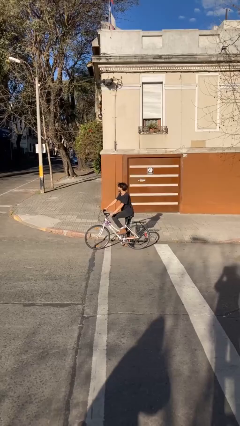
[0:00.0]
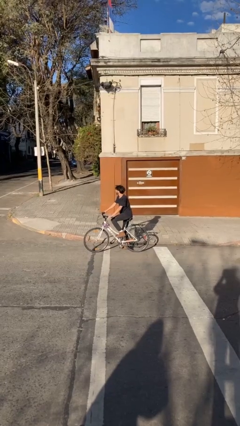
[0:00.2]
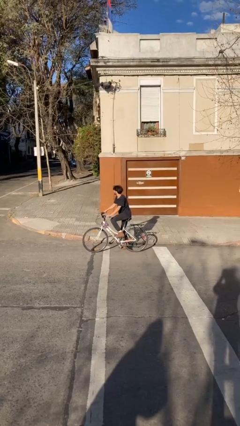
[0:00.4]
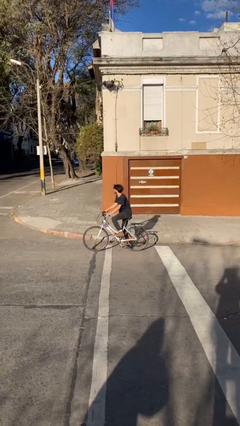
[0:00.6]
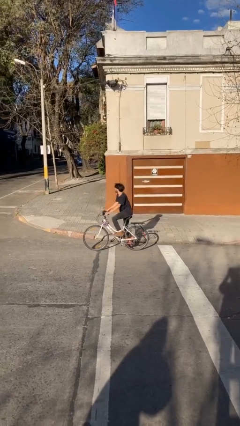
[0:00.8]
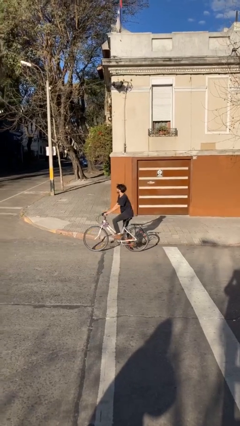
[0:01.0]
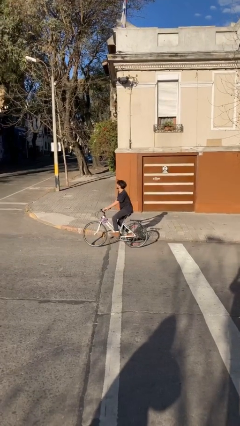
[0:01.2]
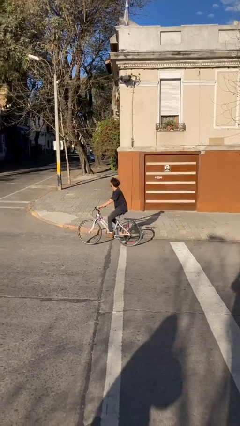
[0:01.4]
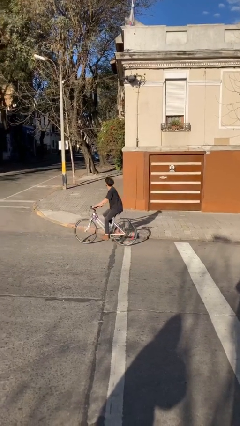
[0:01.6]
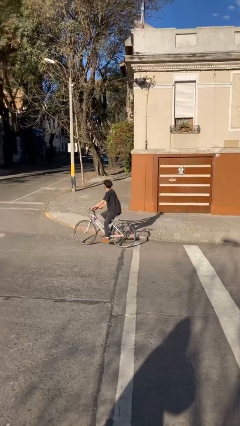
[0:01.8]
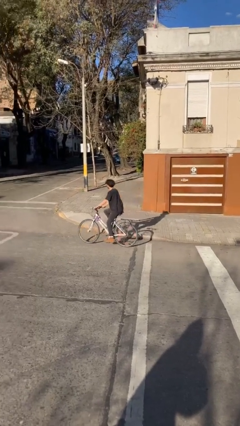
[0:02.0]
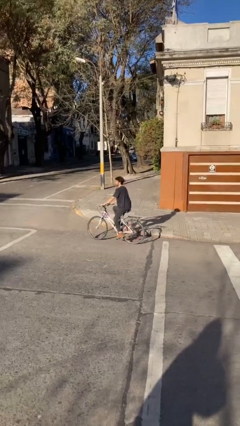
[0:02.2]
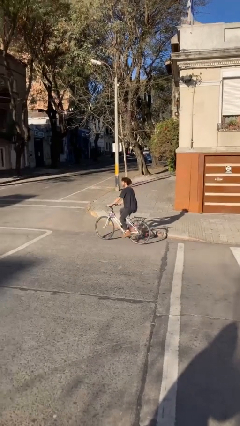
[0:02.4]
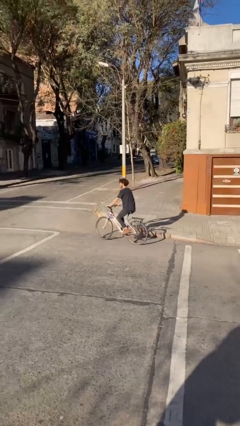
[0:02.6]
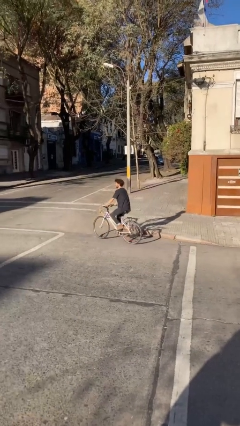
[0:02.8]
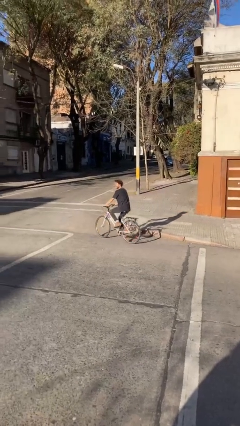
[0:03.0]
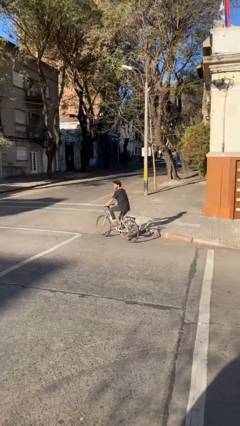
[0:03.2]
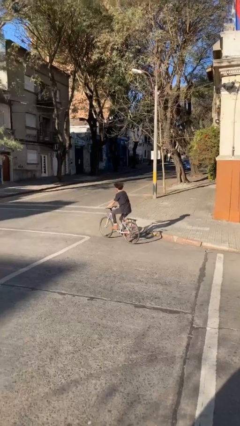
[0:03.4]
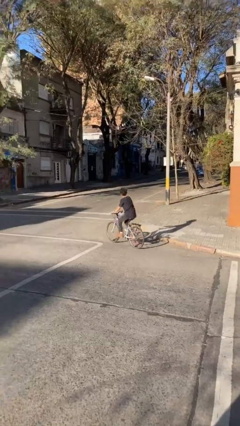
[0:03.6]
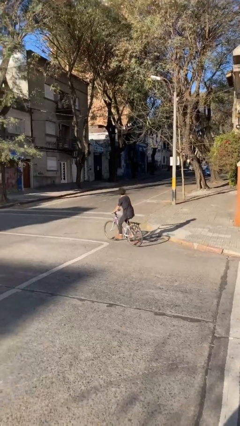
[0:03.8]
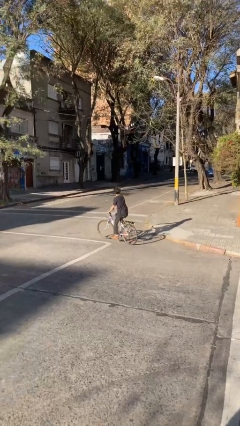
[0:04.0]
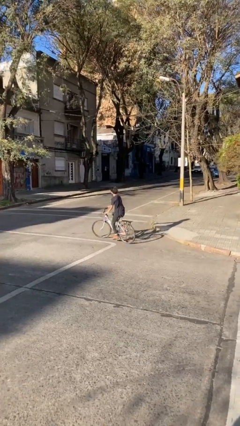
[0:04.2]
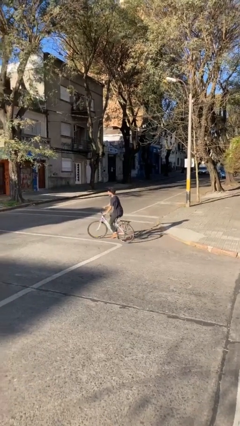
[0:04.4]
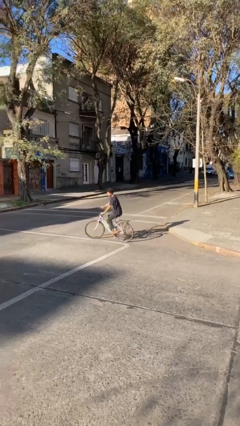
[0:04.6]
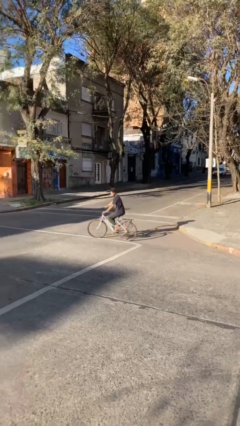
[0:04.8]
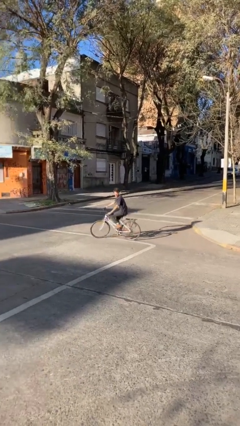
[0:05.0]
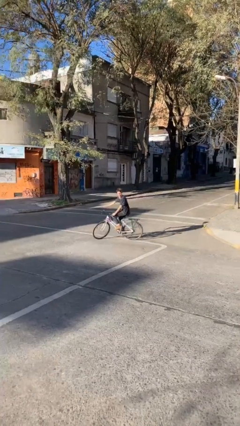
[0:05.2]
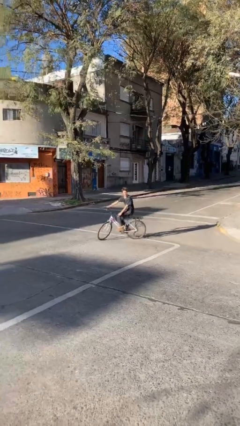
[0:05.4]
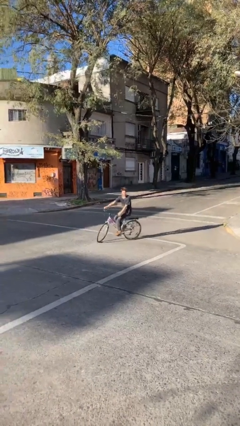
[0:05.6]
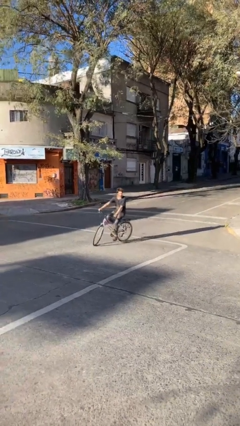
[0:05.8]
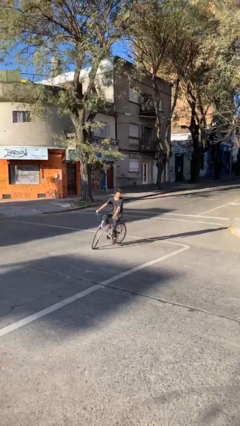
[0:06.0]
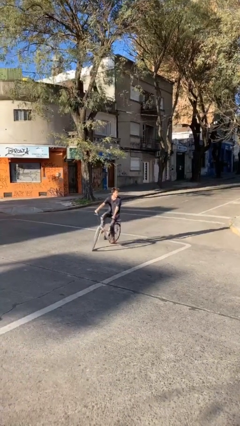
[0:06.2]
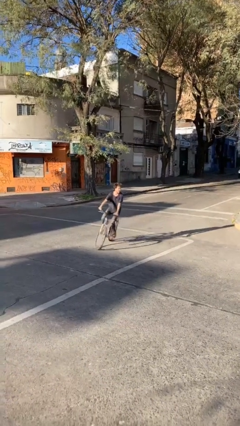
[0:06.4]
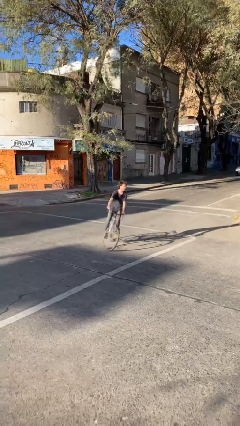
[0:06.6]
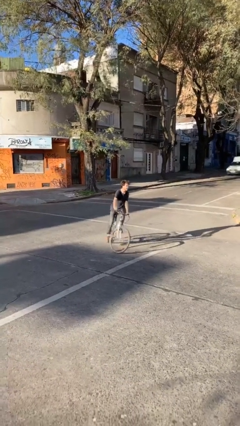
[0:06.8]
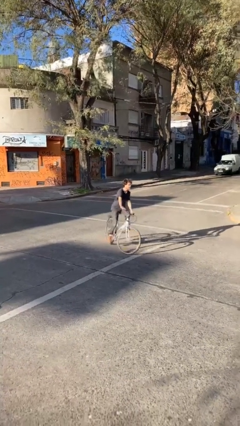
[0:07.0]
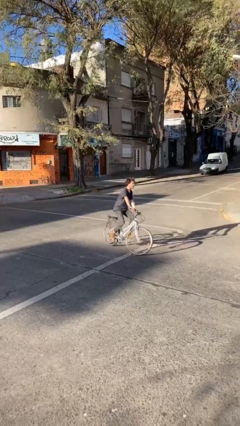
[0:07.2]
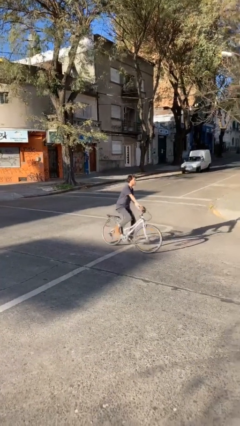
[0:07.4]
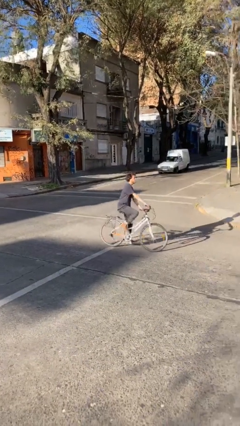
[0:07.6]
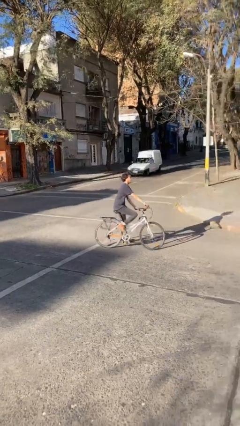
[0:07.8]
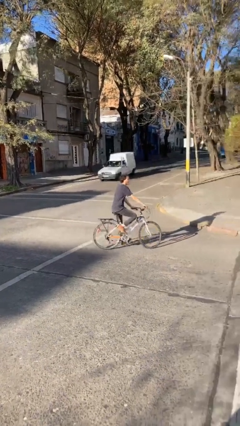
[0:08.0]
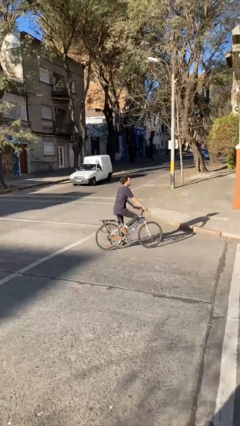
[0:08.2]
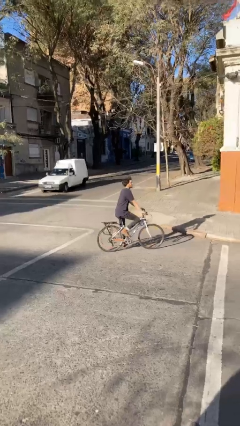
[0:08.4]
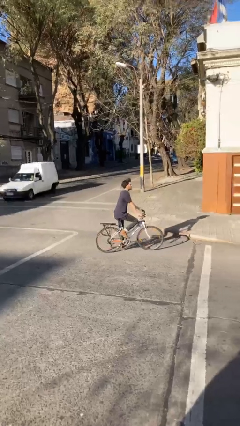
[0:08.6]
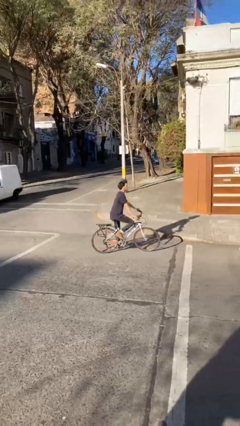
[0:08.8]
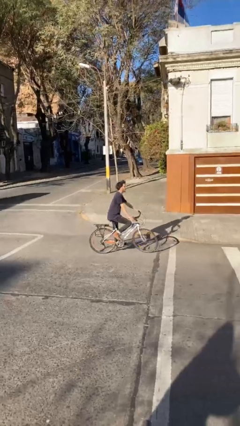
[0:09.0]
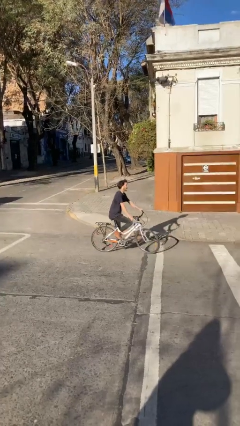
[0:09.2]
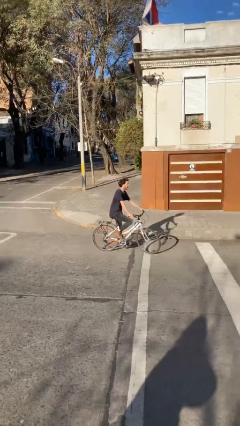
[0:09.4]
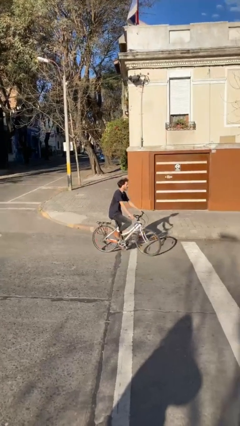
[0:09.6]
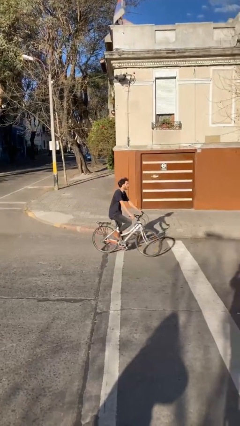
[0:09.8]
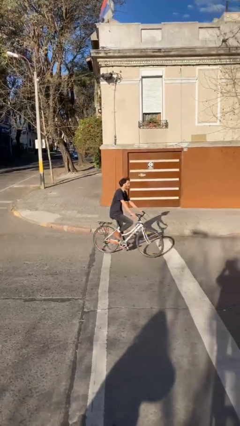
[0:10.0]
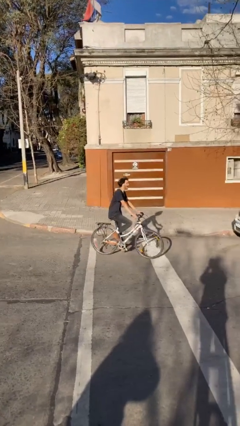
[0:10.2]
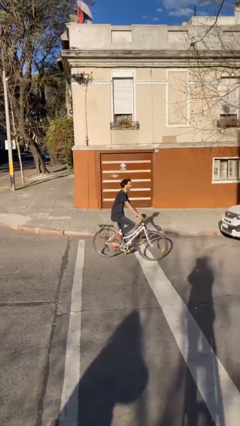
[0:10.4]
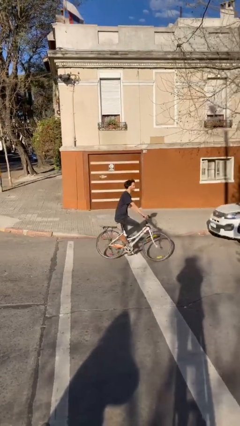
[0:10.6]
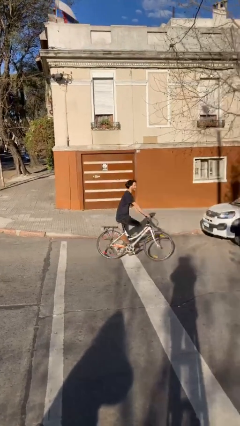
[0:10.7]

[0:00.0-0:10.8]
person rides bicycle

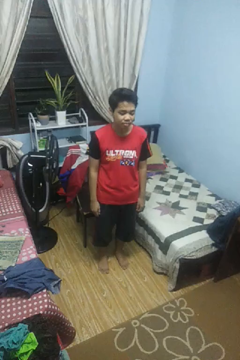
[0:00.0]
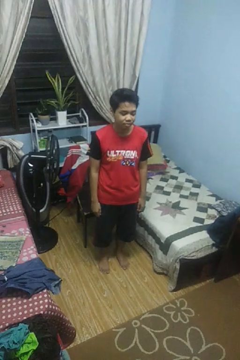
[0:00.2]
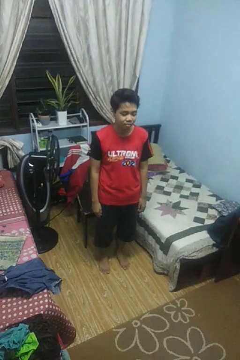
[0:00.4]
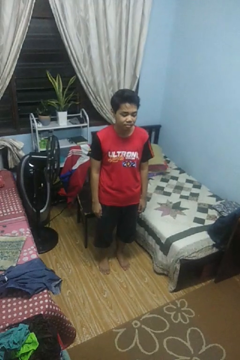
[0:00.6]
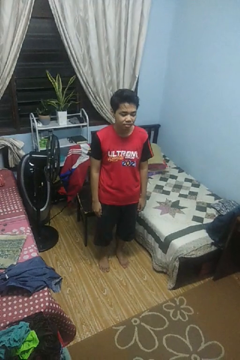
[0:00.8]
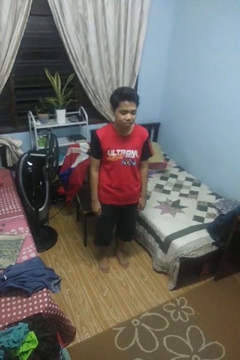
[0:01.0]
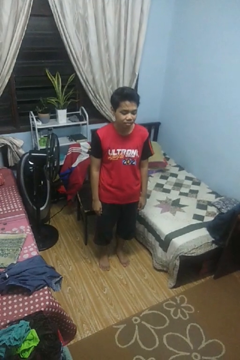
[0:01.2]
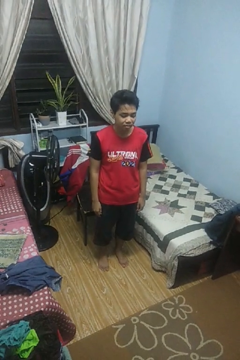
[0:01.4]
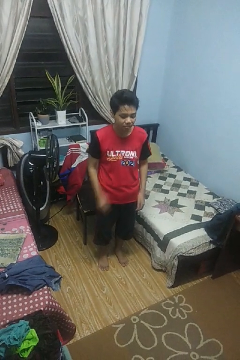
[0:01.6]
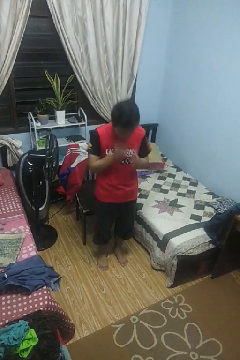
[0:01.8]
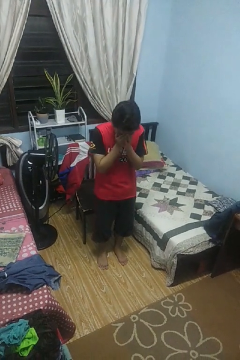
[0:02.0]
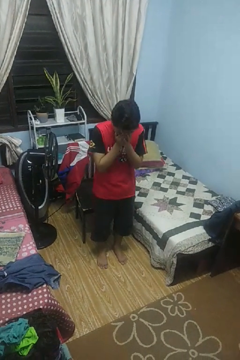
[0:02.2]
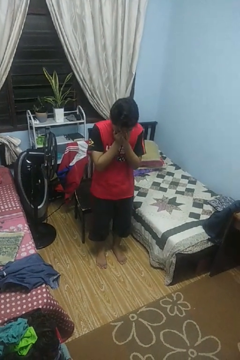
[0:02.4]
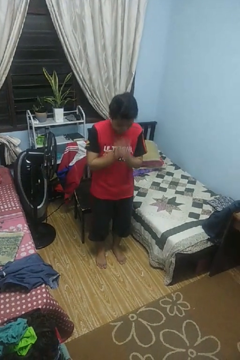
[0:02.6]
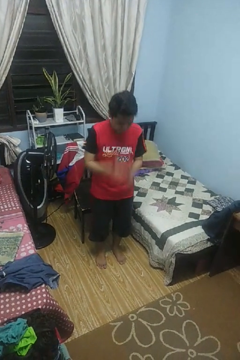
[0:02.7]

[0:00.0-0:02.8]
person sneezes into hand

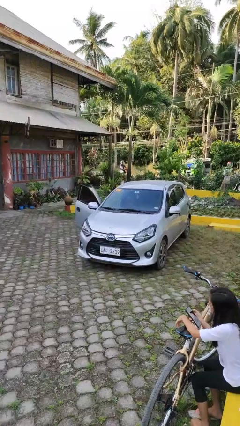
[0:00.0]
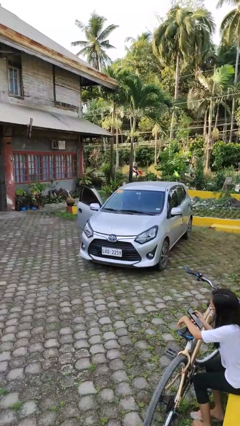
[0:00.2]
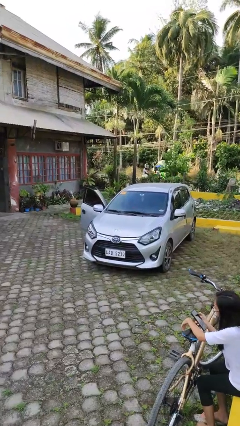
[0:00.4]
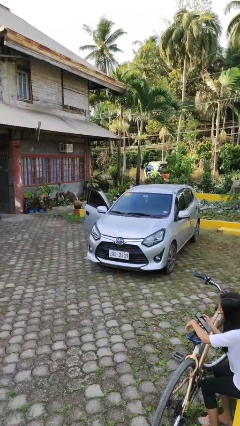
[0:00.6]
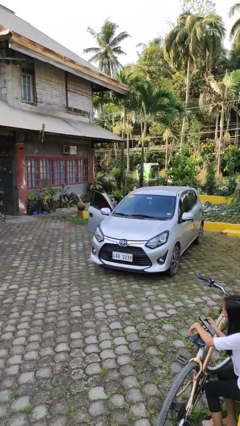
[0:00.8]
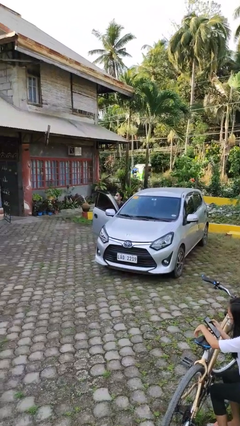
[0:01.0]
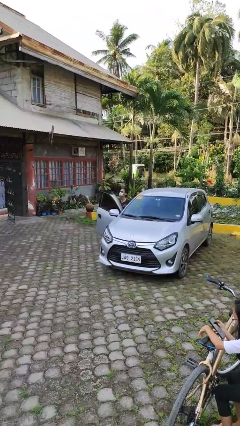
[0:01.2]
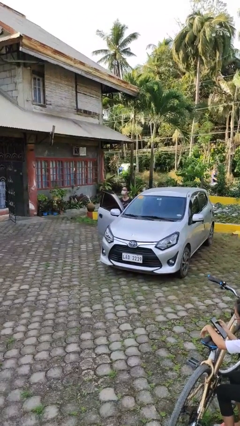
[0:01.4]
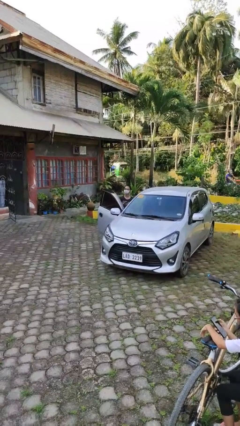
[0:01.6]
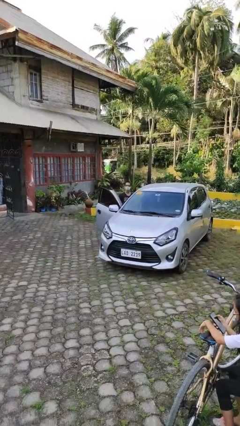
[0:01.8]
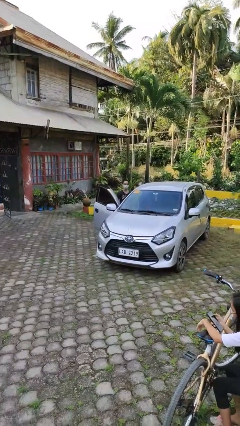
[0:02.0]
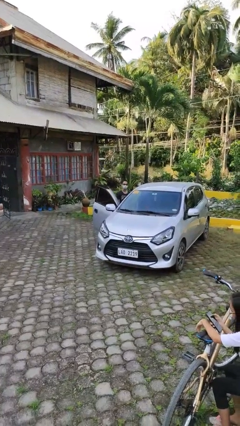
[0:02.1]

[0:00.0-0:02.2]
person exits car

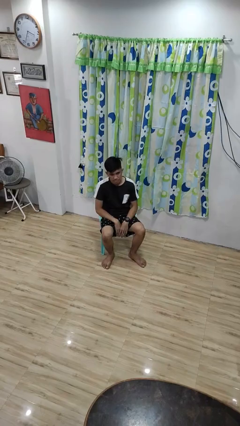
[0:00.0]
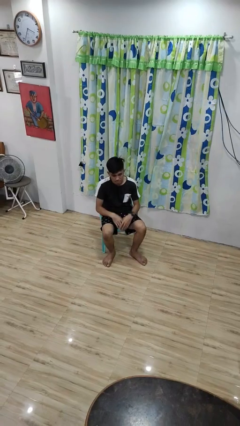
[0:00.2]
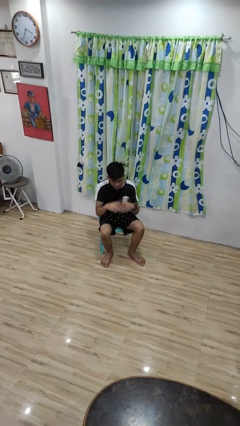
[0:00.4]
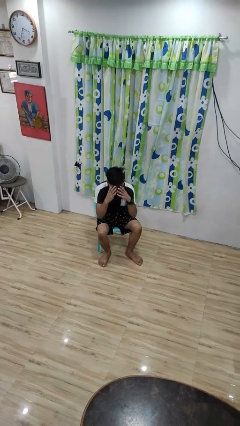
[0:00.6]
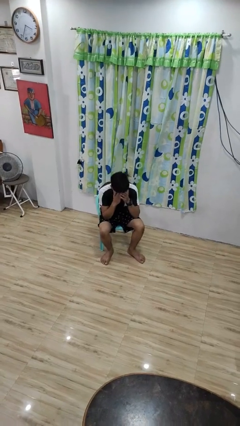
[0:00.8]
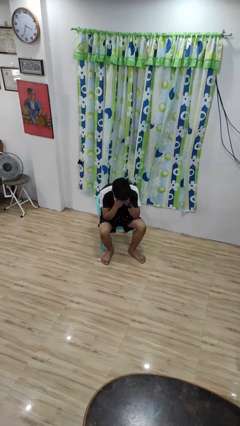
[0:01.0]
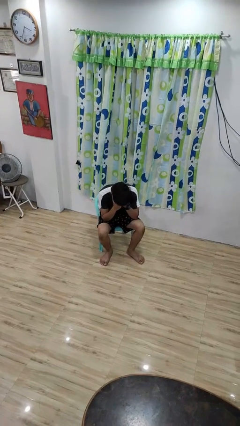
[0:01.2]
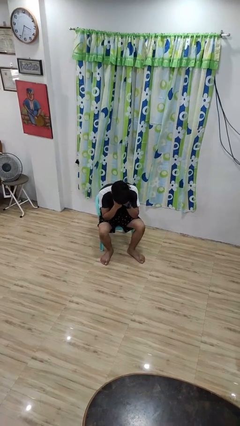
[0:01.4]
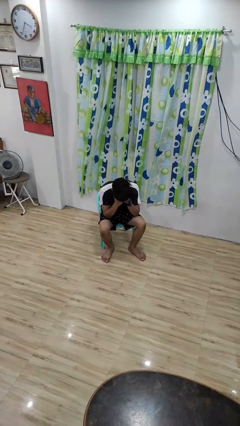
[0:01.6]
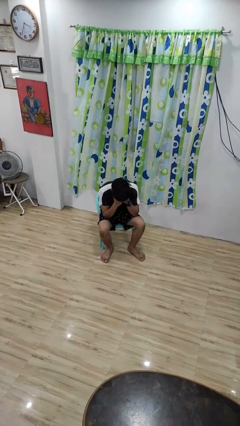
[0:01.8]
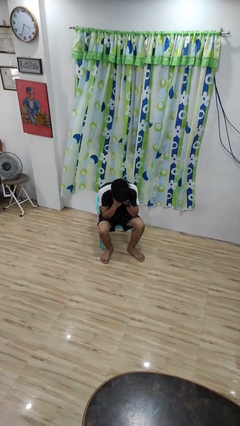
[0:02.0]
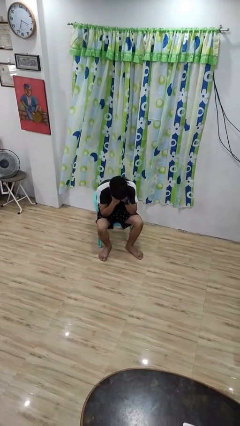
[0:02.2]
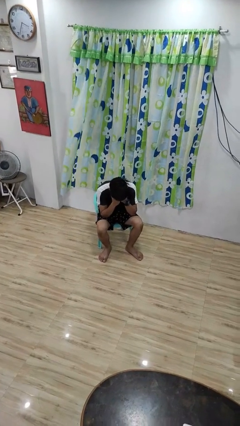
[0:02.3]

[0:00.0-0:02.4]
person covers face with hands
